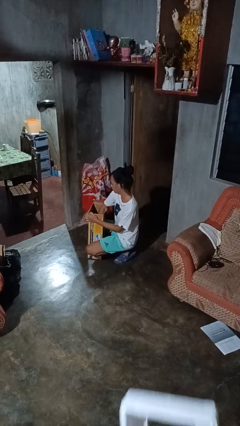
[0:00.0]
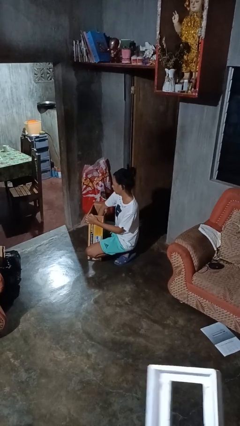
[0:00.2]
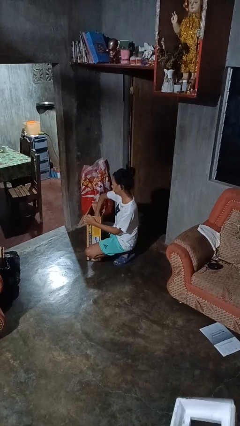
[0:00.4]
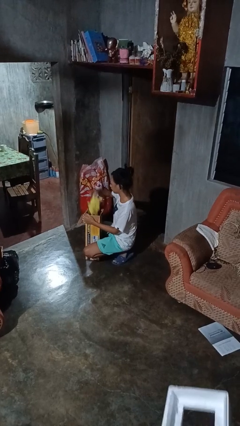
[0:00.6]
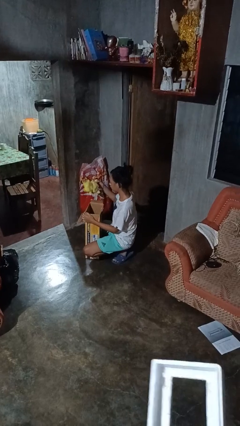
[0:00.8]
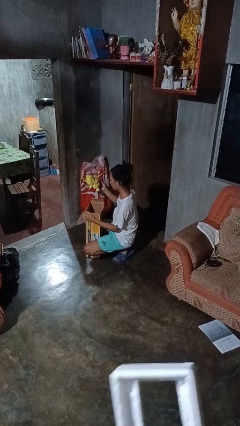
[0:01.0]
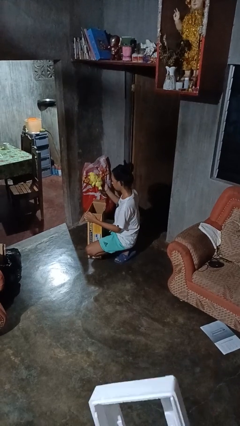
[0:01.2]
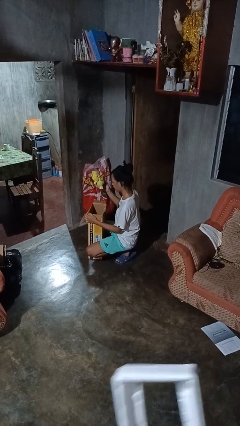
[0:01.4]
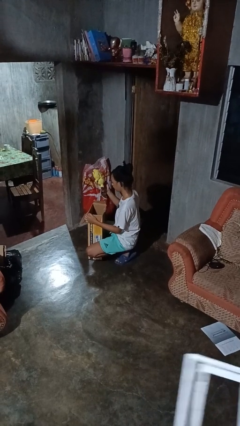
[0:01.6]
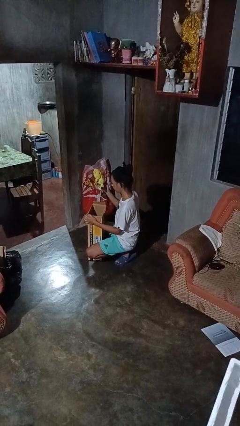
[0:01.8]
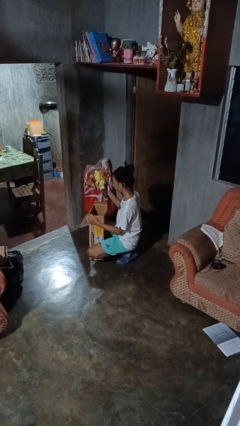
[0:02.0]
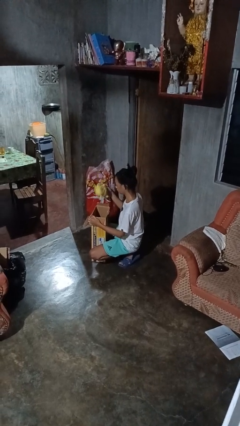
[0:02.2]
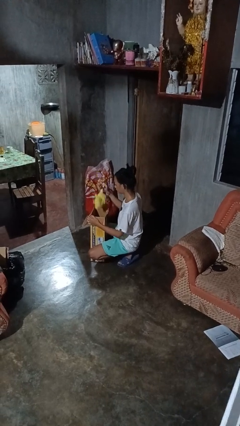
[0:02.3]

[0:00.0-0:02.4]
person takes object from box

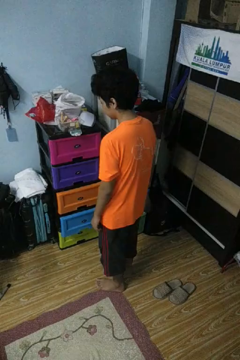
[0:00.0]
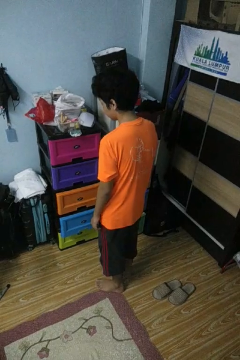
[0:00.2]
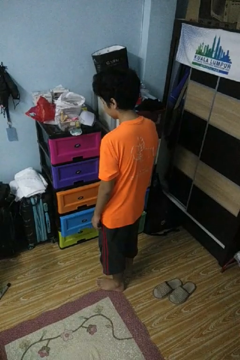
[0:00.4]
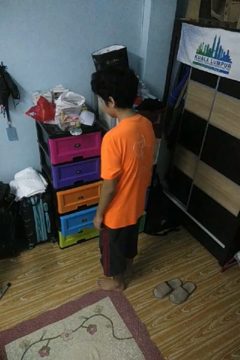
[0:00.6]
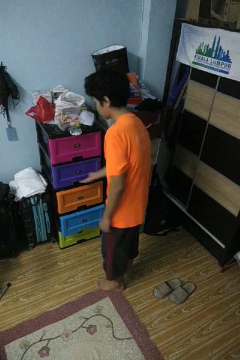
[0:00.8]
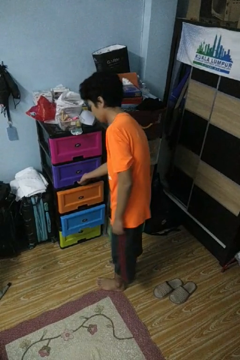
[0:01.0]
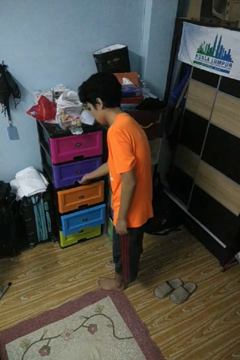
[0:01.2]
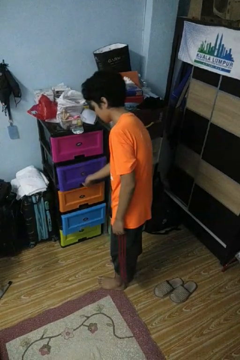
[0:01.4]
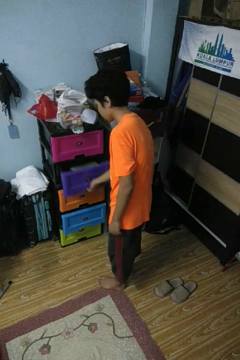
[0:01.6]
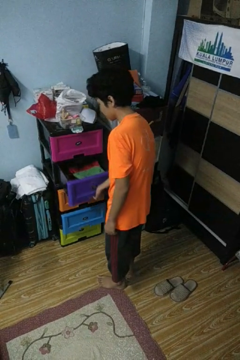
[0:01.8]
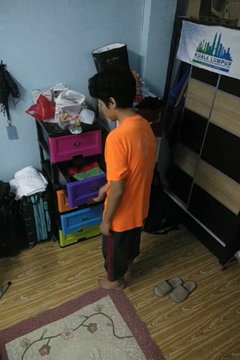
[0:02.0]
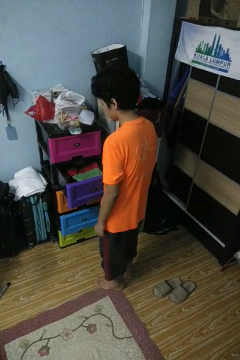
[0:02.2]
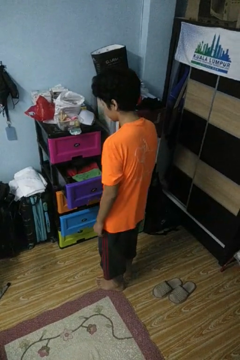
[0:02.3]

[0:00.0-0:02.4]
person opens dresser drawer

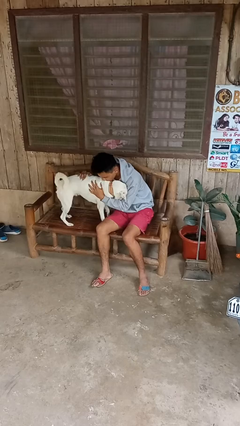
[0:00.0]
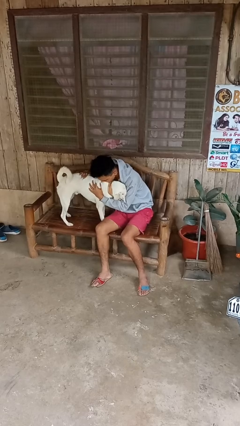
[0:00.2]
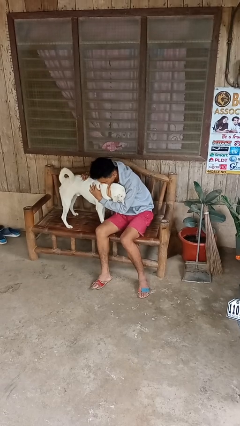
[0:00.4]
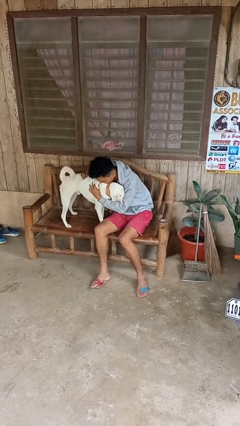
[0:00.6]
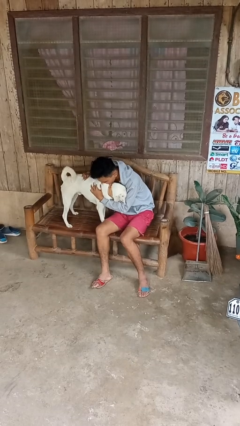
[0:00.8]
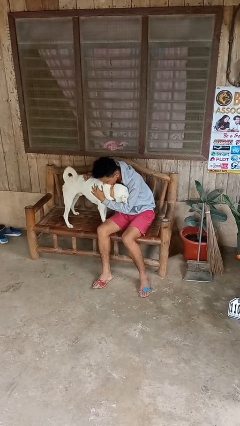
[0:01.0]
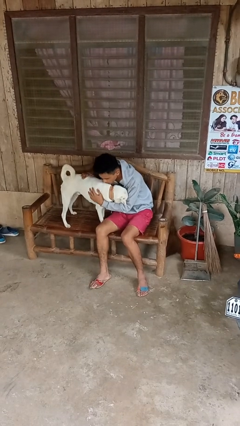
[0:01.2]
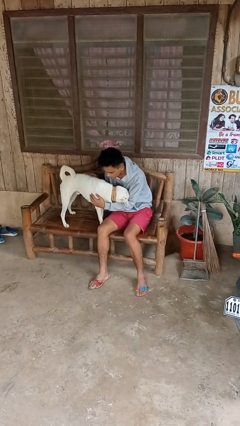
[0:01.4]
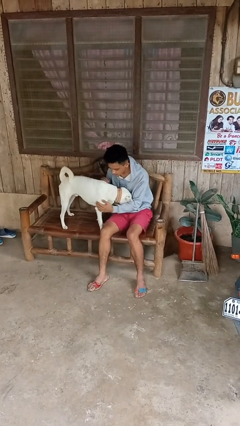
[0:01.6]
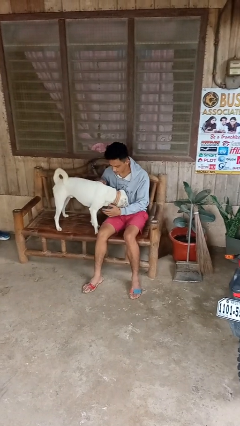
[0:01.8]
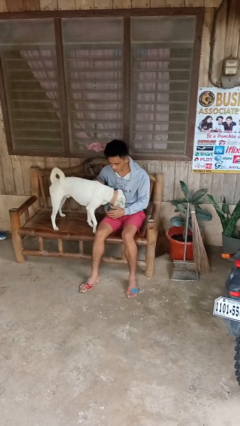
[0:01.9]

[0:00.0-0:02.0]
person hugs dog

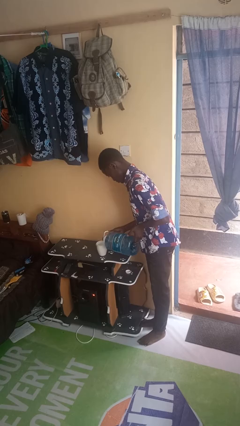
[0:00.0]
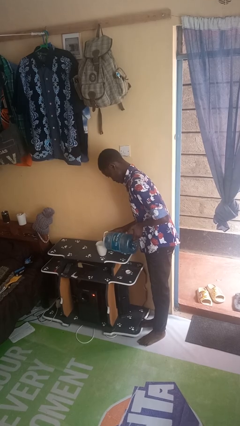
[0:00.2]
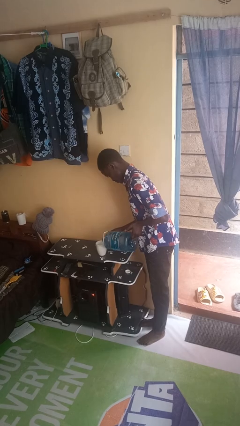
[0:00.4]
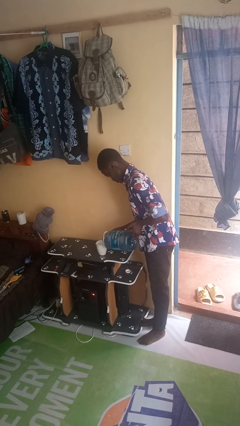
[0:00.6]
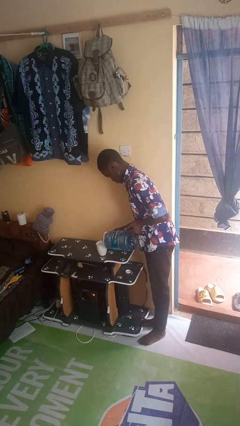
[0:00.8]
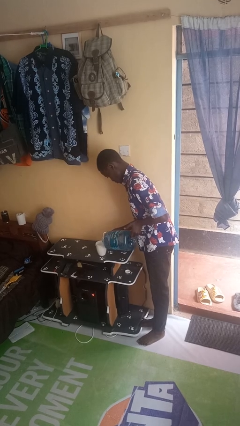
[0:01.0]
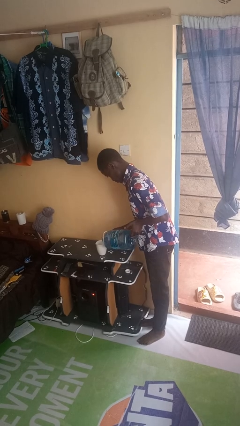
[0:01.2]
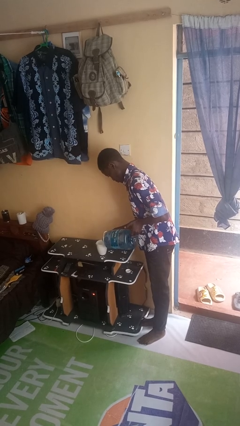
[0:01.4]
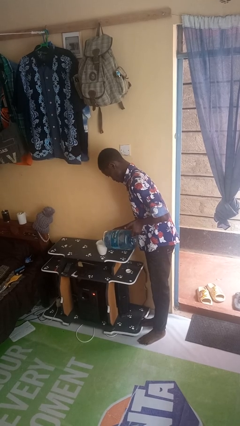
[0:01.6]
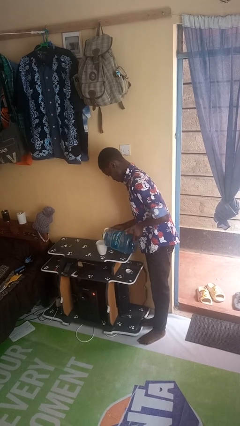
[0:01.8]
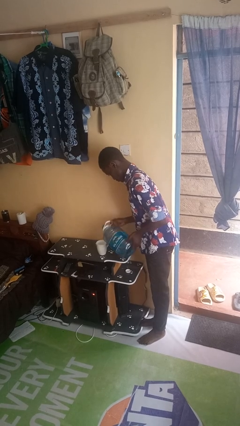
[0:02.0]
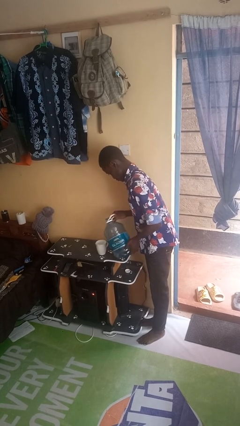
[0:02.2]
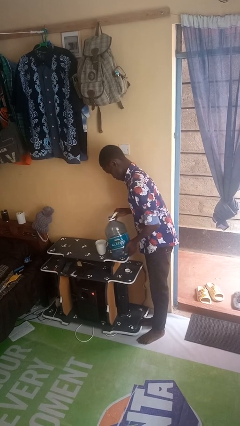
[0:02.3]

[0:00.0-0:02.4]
person pours liquid into cup

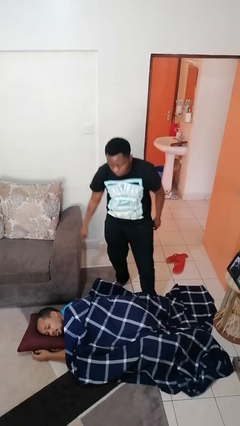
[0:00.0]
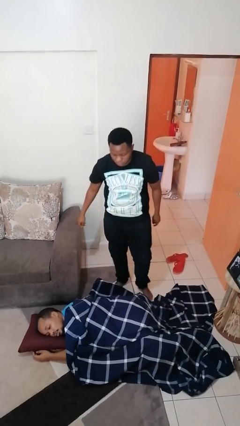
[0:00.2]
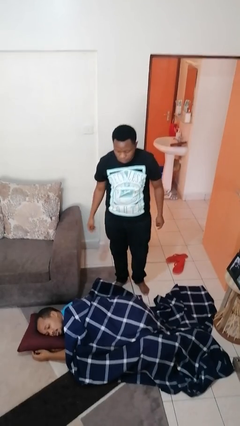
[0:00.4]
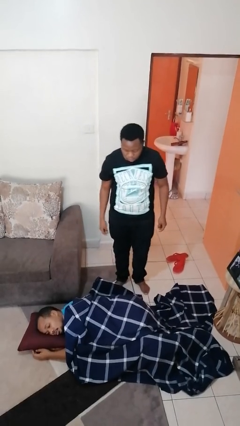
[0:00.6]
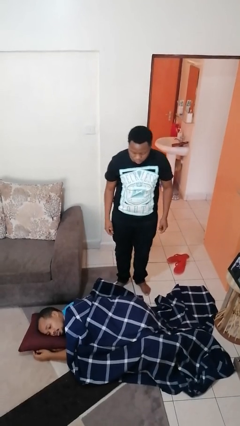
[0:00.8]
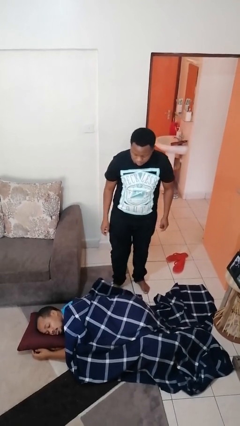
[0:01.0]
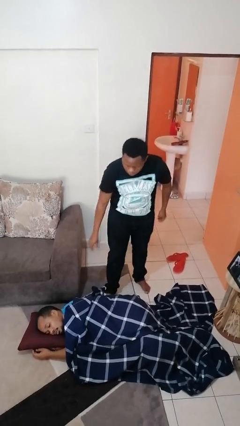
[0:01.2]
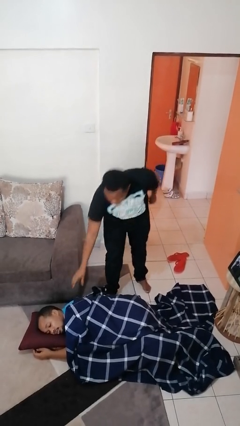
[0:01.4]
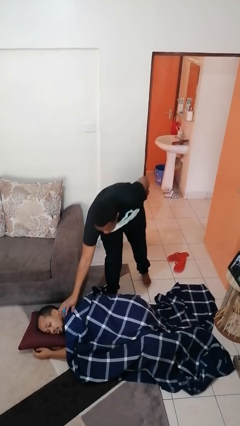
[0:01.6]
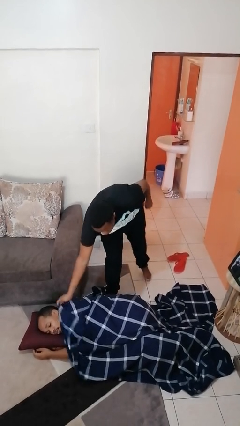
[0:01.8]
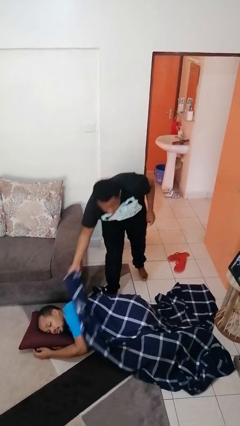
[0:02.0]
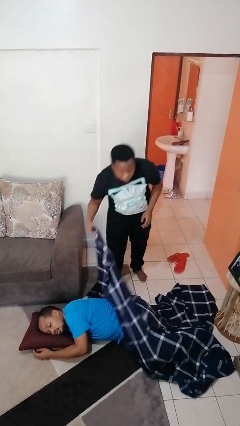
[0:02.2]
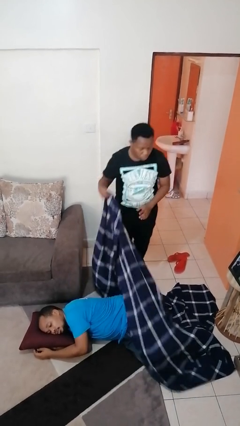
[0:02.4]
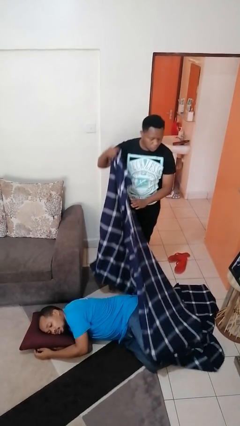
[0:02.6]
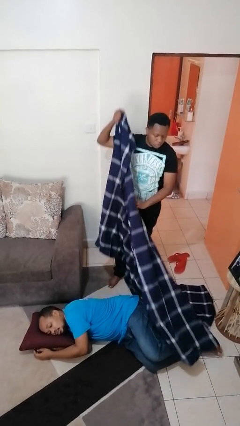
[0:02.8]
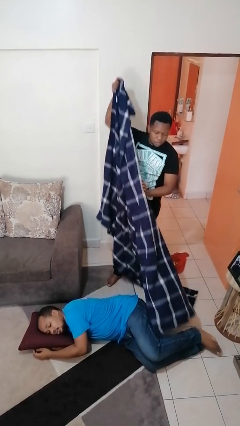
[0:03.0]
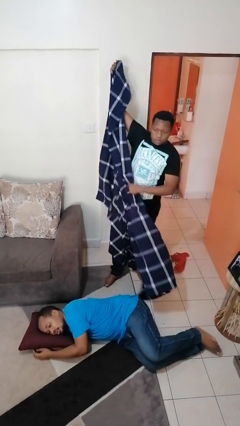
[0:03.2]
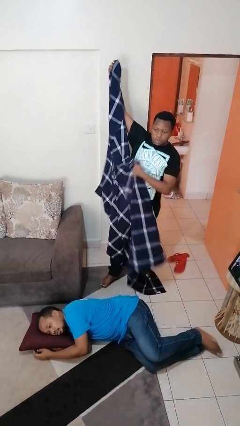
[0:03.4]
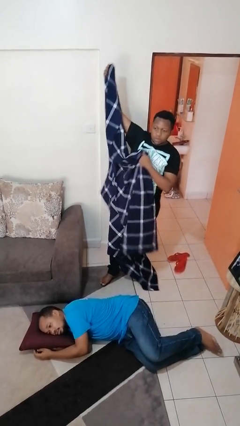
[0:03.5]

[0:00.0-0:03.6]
person uncovers friend with blanket

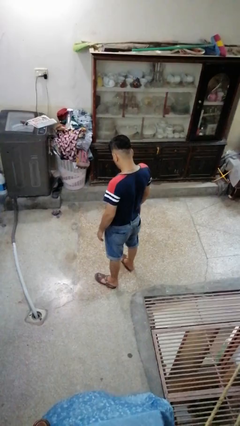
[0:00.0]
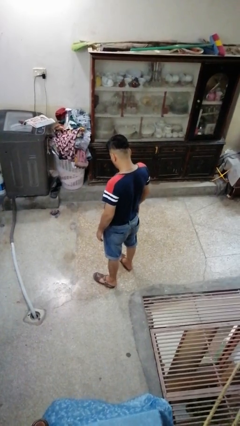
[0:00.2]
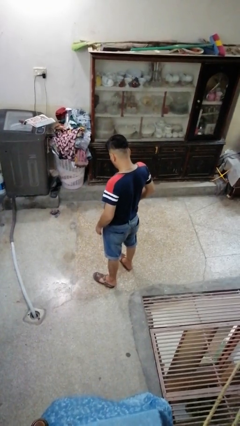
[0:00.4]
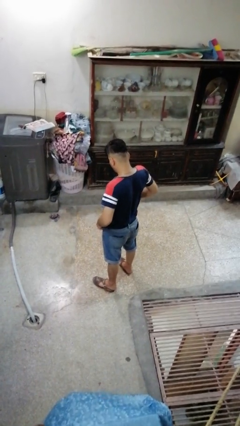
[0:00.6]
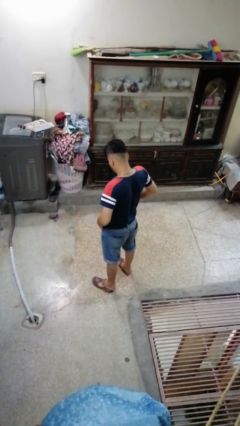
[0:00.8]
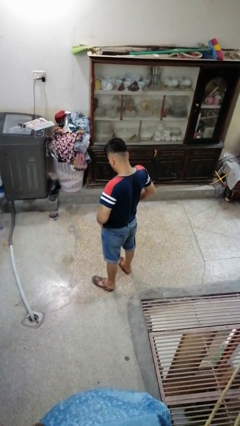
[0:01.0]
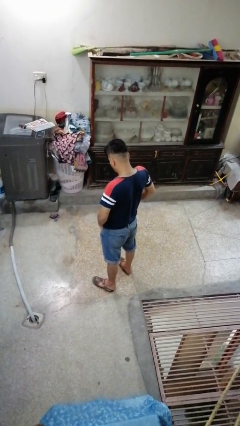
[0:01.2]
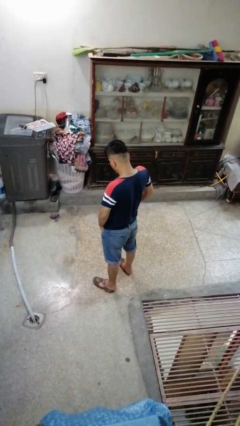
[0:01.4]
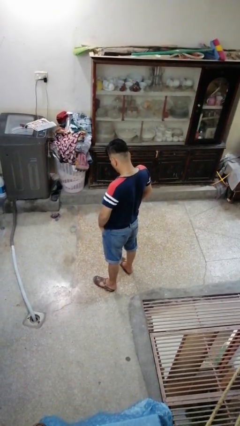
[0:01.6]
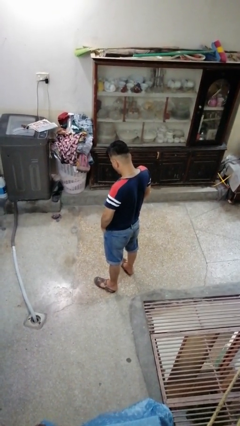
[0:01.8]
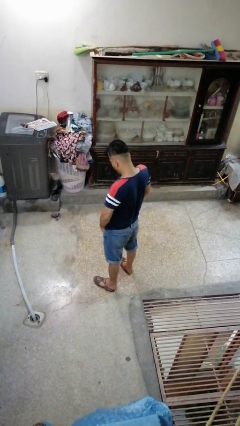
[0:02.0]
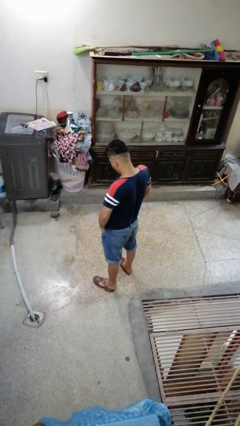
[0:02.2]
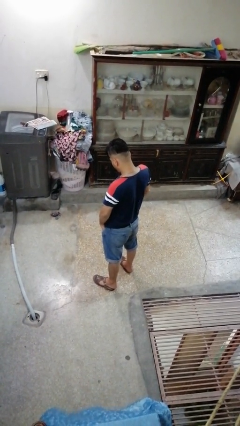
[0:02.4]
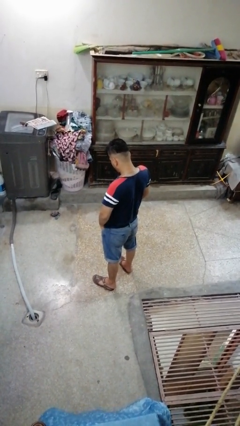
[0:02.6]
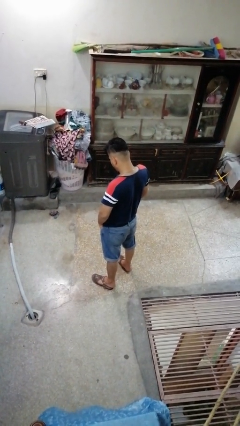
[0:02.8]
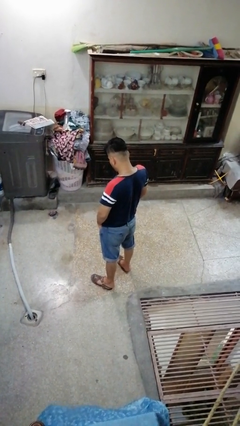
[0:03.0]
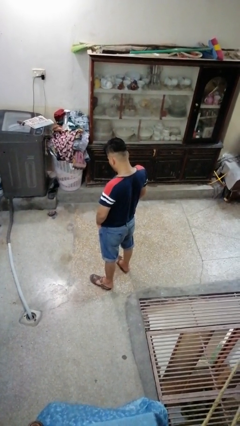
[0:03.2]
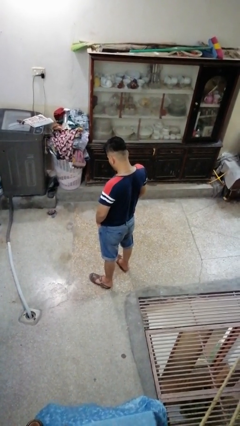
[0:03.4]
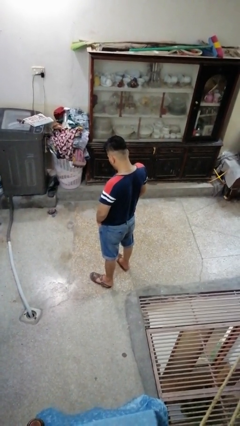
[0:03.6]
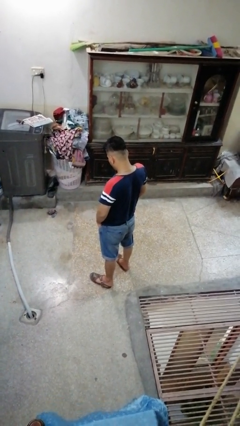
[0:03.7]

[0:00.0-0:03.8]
person puts hands in back pockets

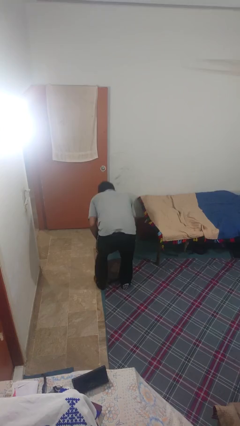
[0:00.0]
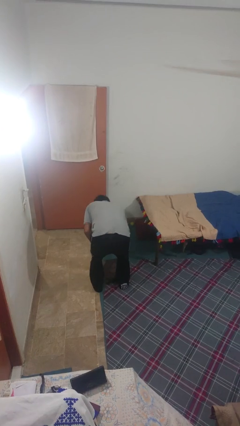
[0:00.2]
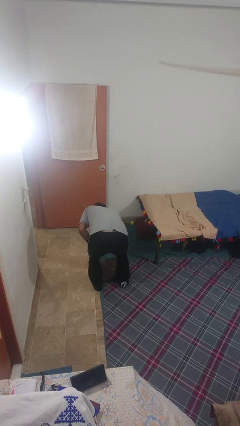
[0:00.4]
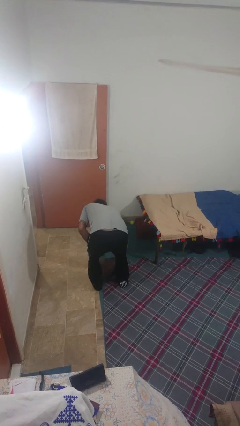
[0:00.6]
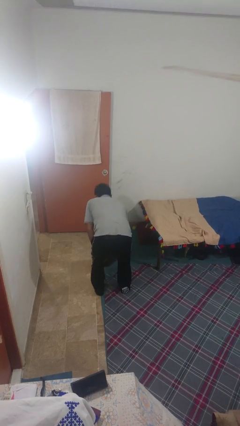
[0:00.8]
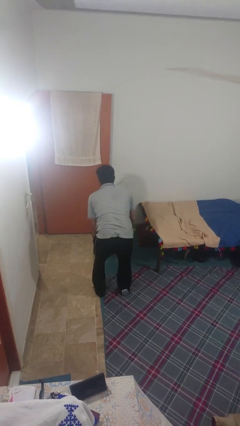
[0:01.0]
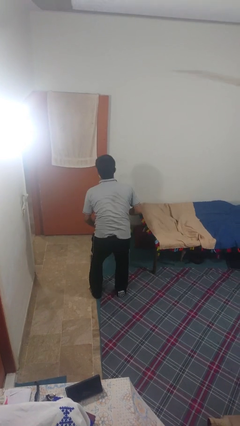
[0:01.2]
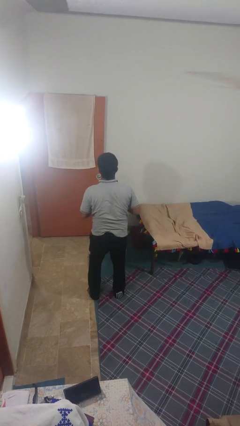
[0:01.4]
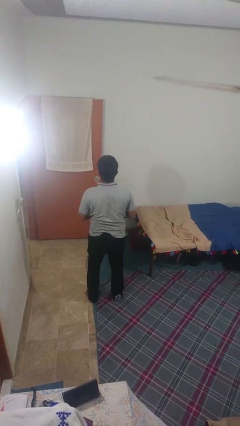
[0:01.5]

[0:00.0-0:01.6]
person picks up object from floor
